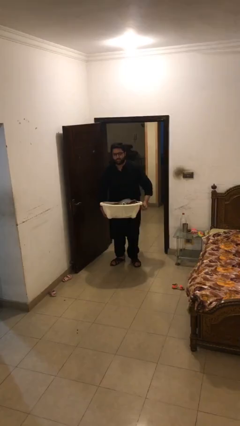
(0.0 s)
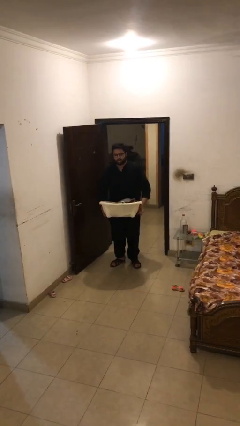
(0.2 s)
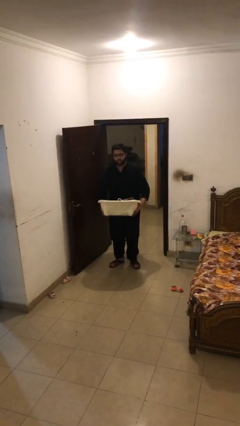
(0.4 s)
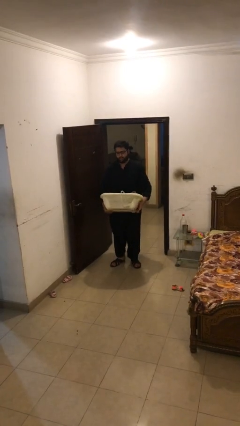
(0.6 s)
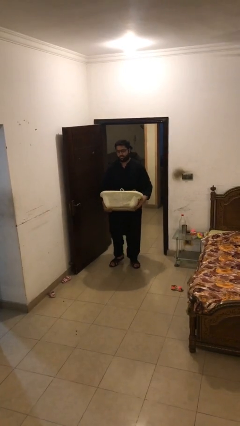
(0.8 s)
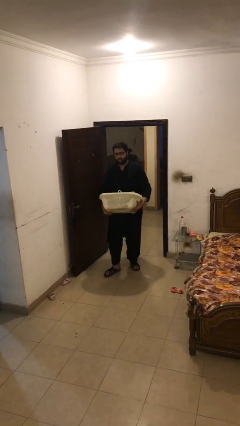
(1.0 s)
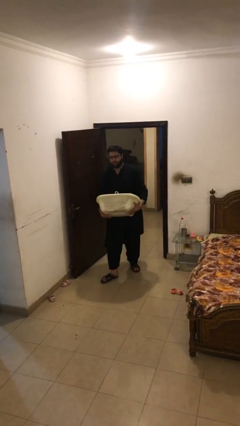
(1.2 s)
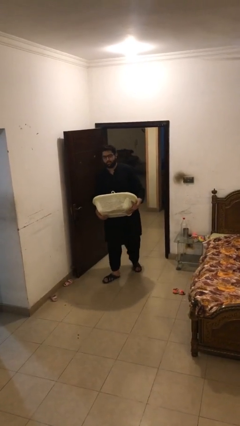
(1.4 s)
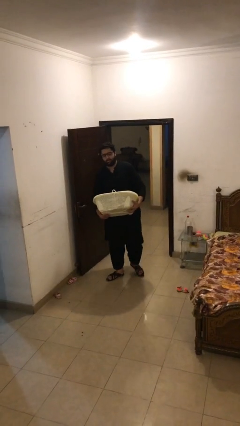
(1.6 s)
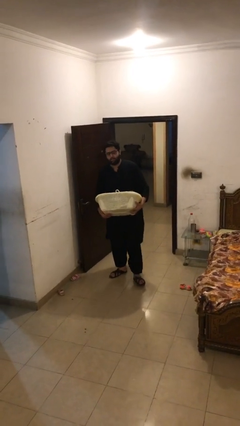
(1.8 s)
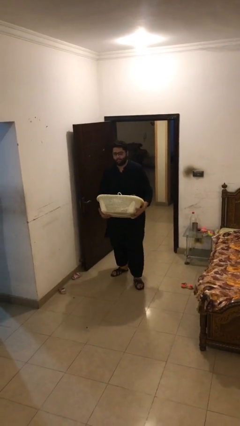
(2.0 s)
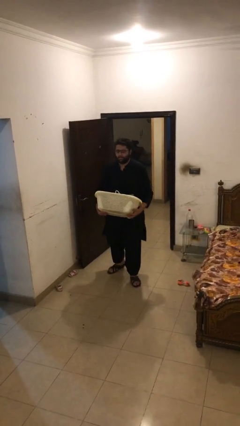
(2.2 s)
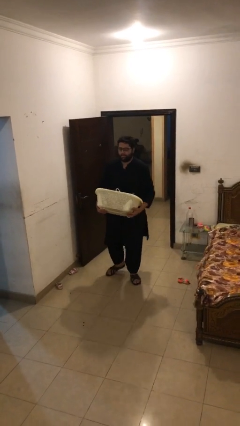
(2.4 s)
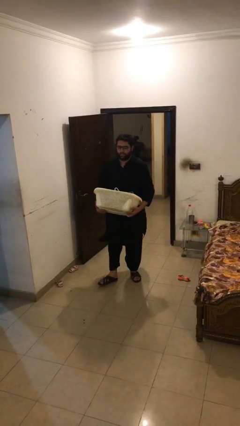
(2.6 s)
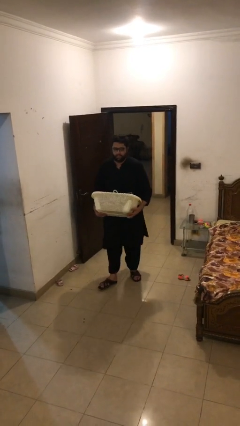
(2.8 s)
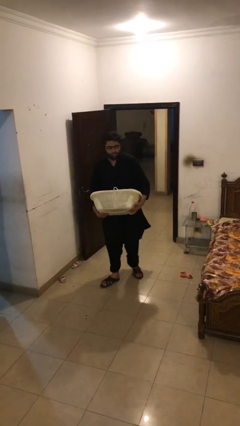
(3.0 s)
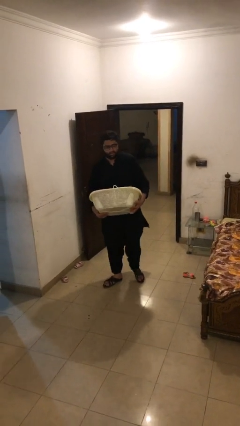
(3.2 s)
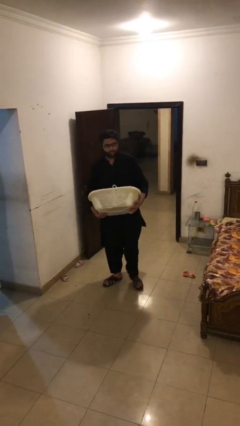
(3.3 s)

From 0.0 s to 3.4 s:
person carries heavy object

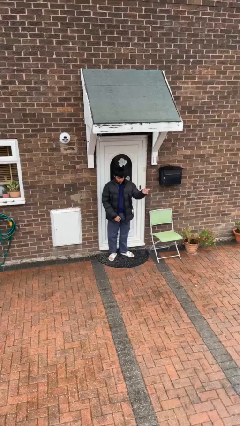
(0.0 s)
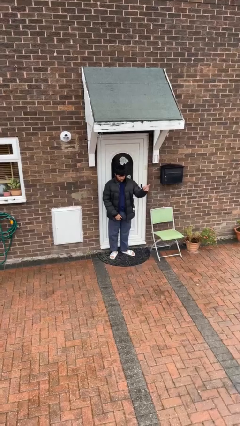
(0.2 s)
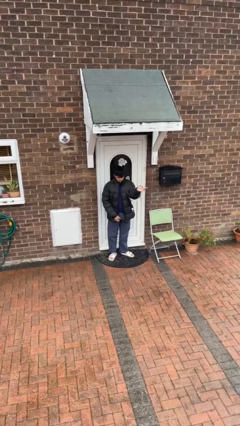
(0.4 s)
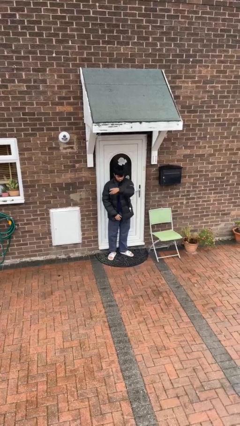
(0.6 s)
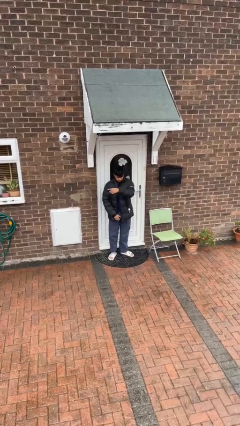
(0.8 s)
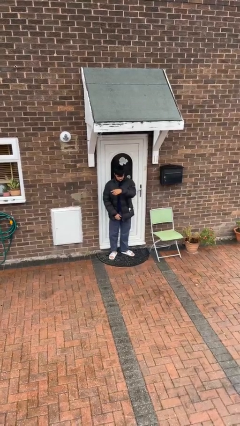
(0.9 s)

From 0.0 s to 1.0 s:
person gestures swipe right

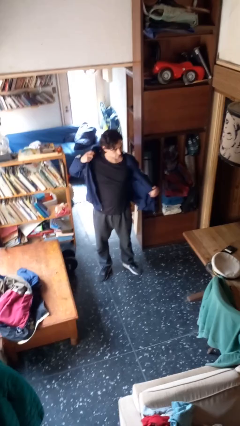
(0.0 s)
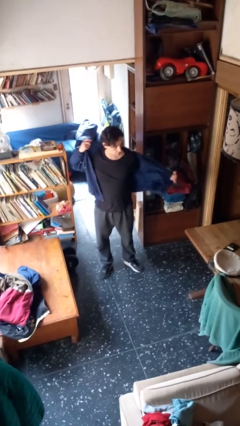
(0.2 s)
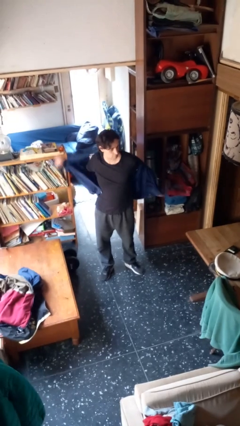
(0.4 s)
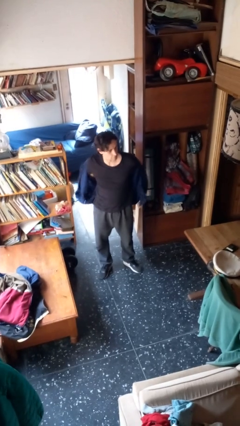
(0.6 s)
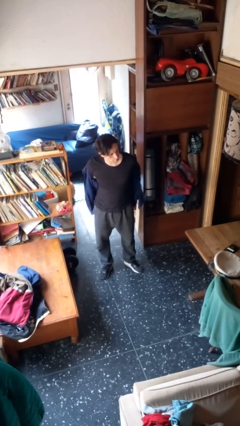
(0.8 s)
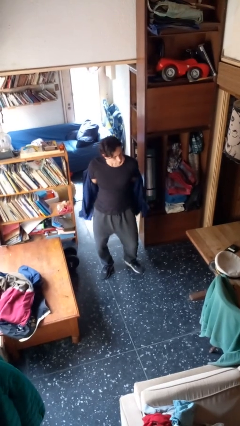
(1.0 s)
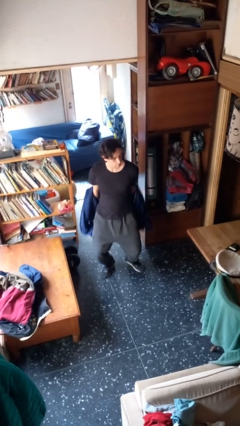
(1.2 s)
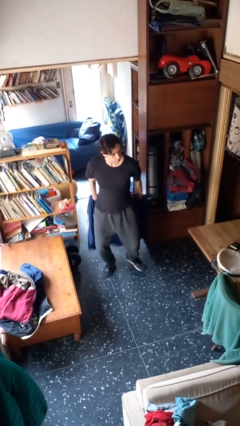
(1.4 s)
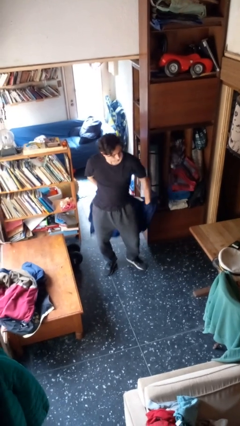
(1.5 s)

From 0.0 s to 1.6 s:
person takes off jacket

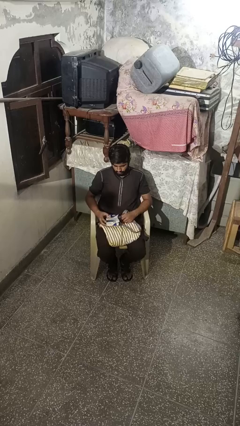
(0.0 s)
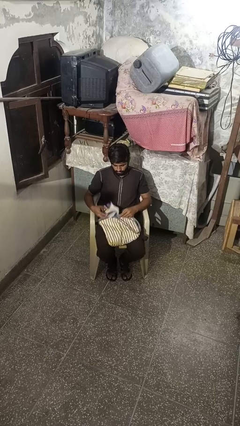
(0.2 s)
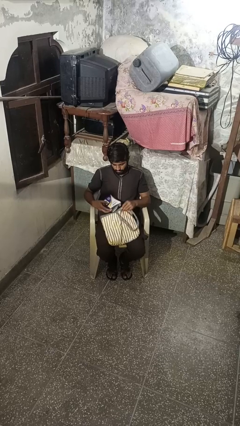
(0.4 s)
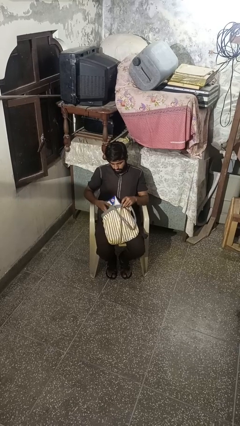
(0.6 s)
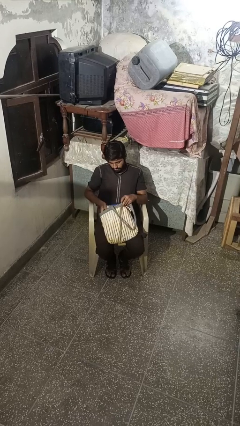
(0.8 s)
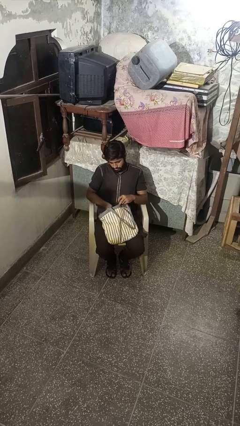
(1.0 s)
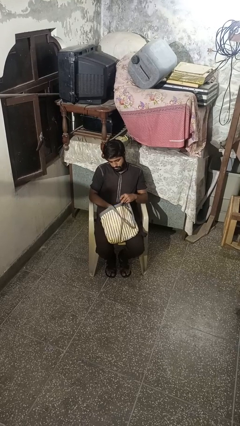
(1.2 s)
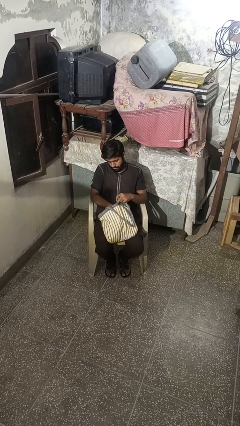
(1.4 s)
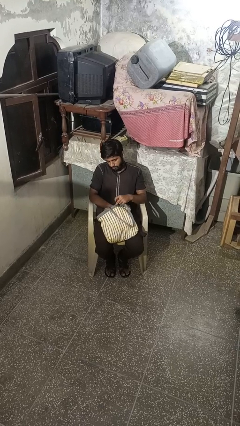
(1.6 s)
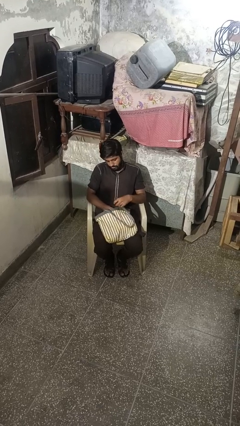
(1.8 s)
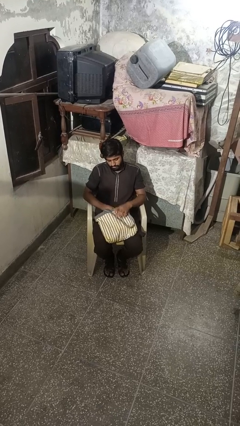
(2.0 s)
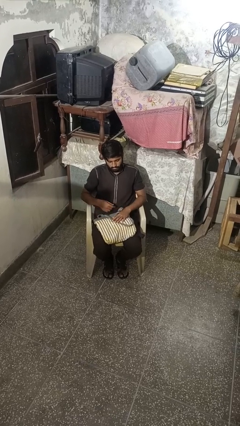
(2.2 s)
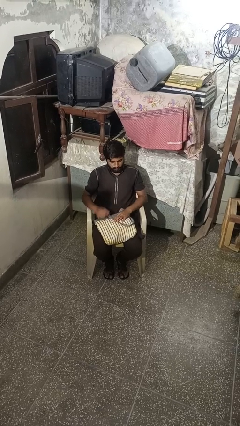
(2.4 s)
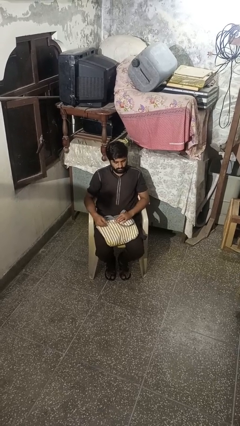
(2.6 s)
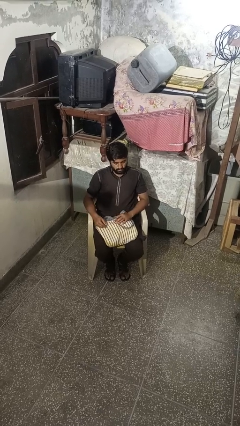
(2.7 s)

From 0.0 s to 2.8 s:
person puts object into backpack

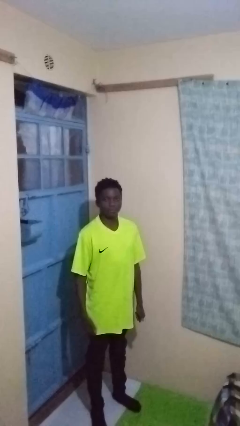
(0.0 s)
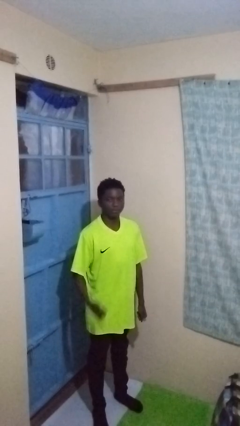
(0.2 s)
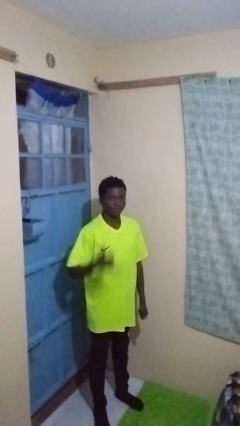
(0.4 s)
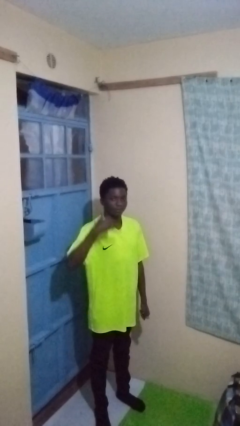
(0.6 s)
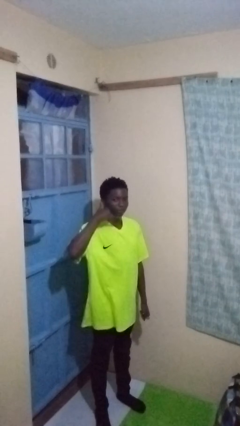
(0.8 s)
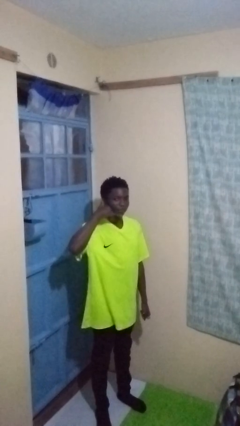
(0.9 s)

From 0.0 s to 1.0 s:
person gestures call me

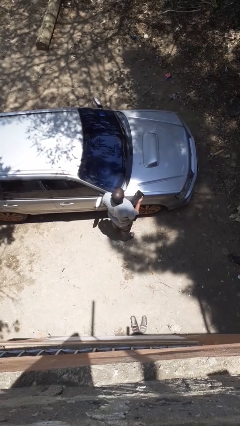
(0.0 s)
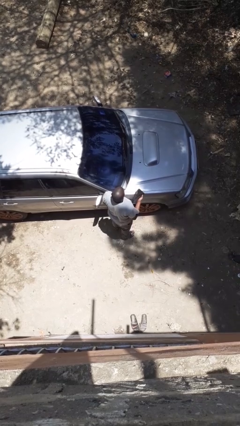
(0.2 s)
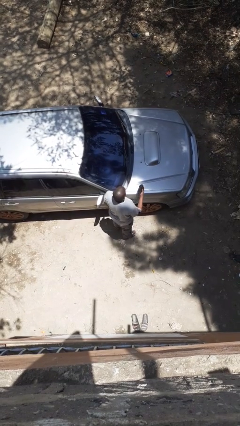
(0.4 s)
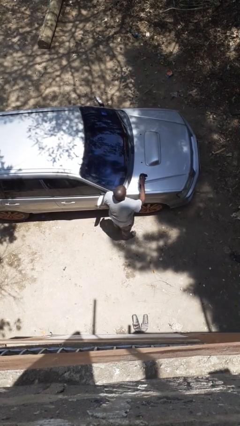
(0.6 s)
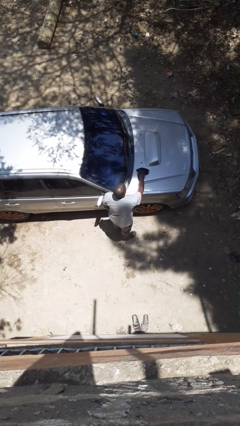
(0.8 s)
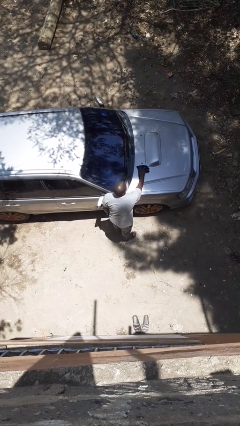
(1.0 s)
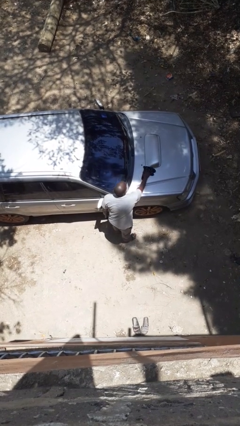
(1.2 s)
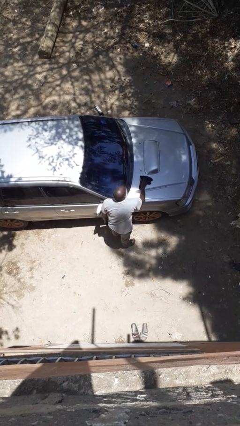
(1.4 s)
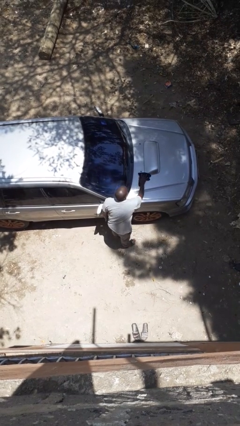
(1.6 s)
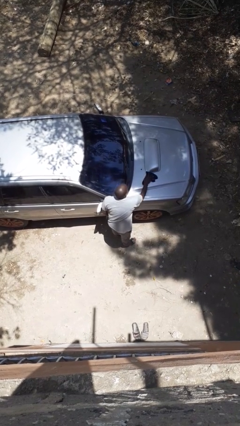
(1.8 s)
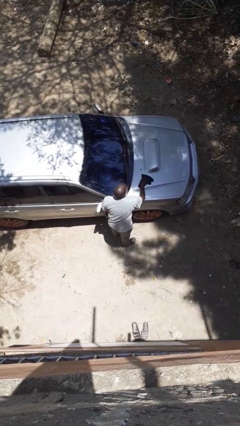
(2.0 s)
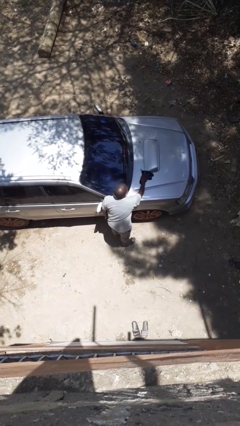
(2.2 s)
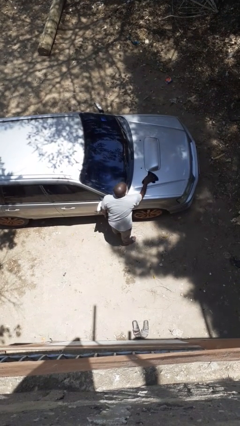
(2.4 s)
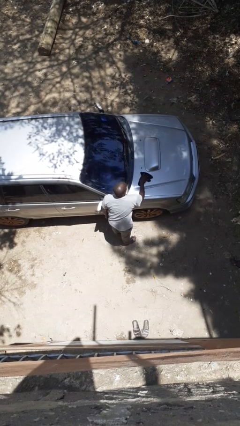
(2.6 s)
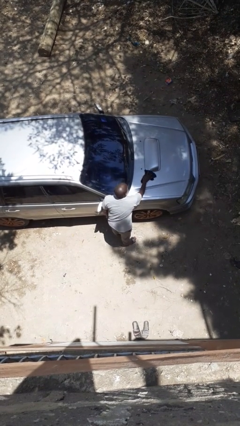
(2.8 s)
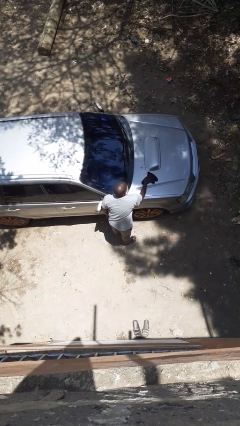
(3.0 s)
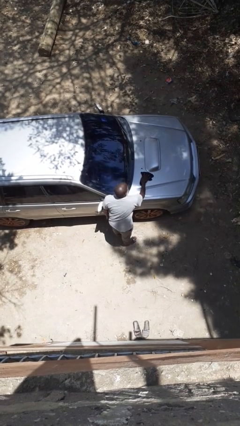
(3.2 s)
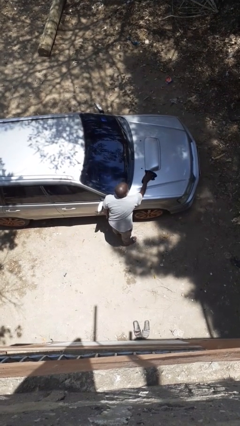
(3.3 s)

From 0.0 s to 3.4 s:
person polishes car with rag

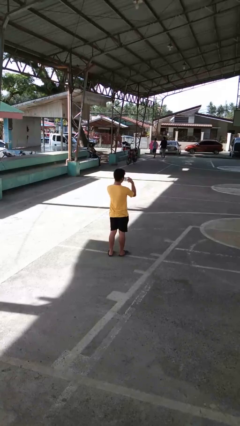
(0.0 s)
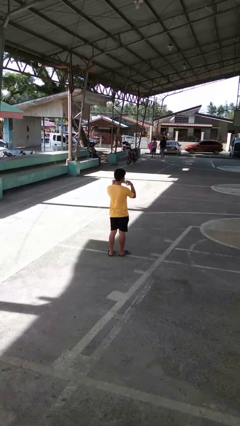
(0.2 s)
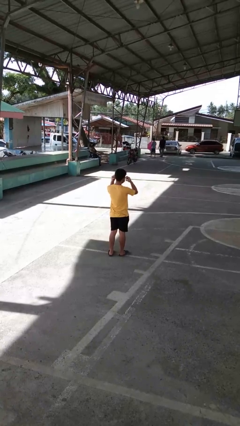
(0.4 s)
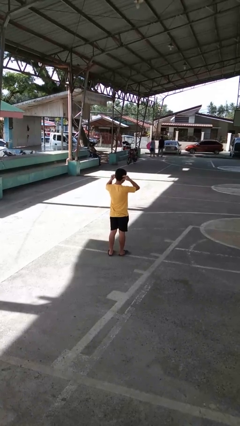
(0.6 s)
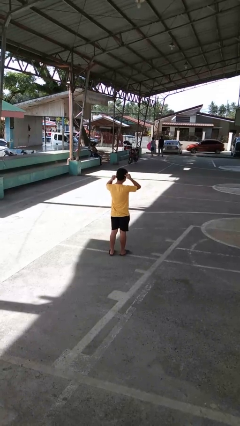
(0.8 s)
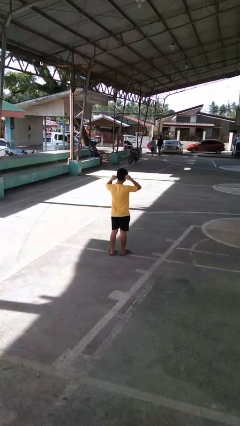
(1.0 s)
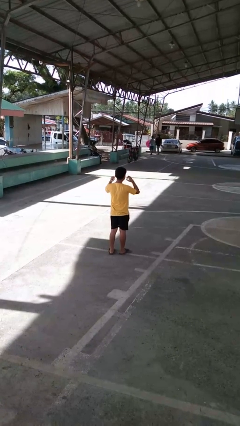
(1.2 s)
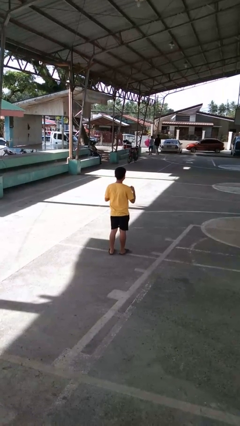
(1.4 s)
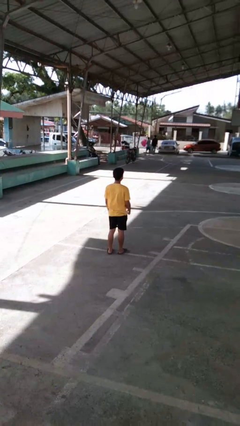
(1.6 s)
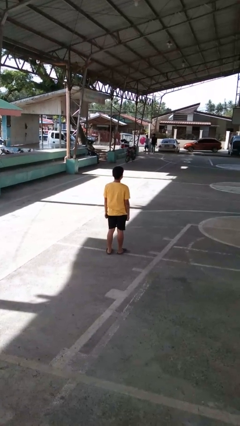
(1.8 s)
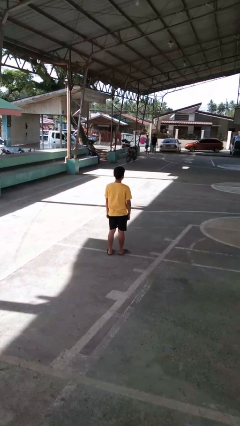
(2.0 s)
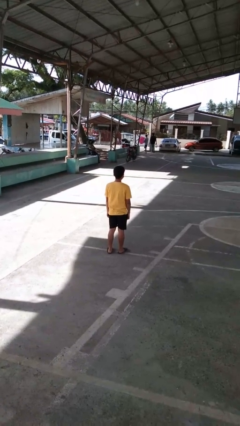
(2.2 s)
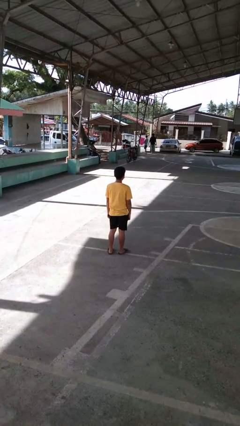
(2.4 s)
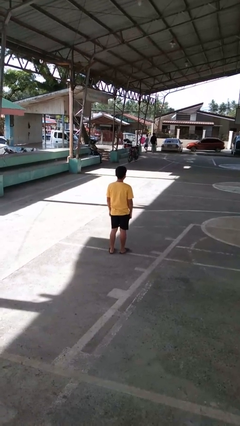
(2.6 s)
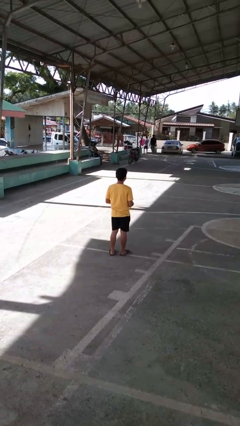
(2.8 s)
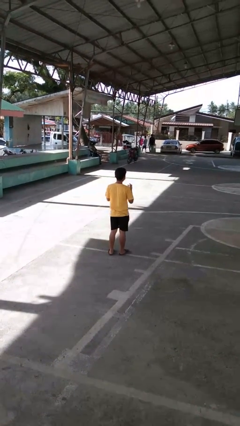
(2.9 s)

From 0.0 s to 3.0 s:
person puts on facemask

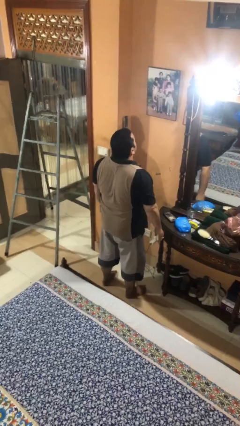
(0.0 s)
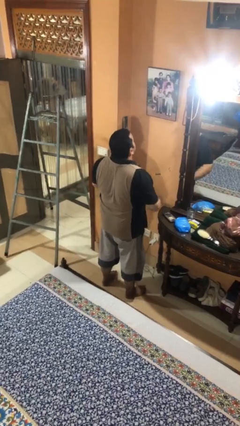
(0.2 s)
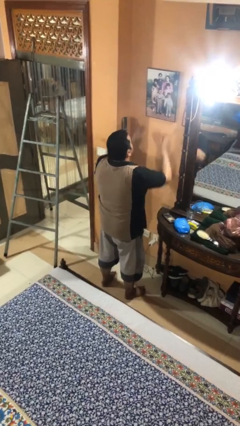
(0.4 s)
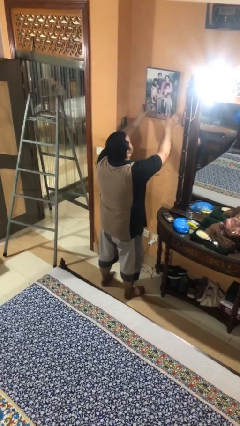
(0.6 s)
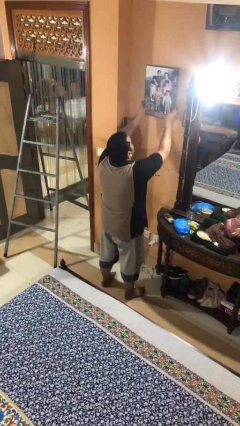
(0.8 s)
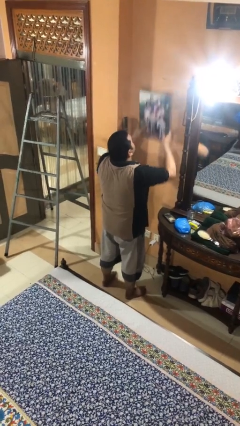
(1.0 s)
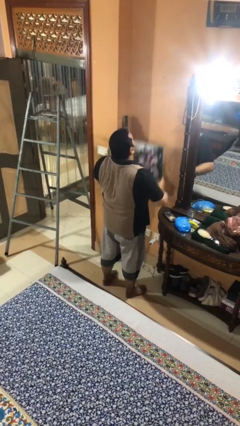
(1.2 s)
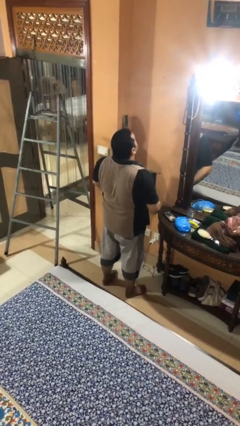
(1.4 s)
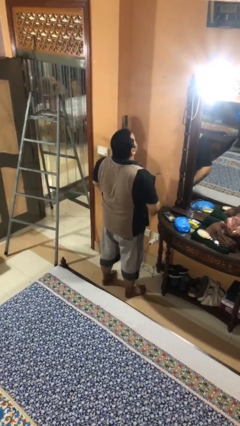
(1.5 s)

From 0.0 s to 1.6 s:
person takes down picture frame
